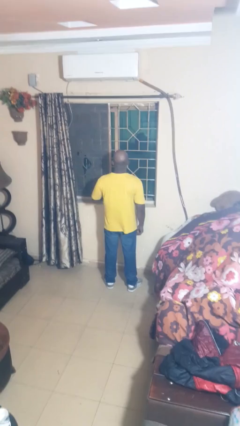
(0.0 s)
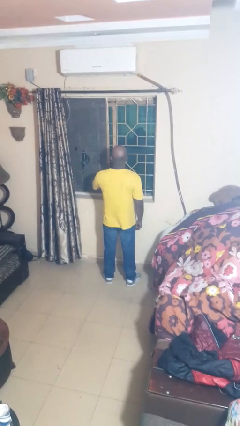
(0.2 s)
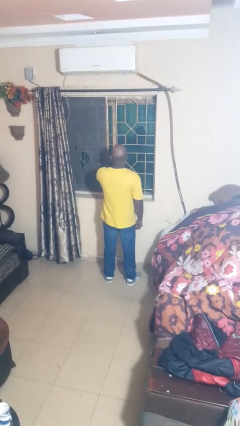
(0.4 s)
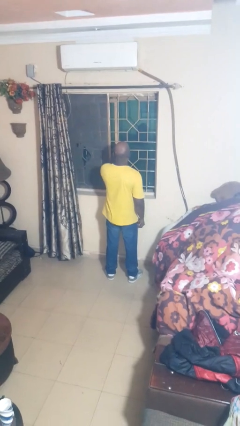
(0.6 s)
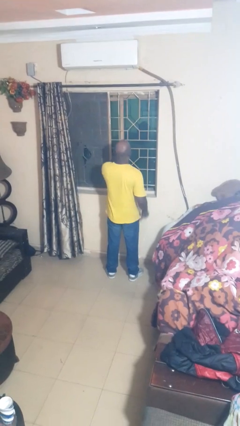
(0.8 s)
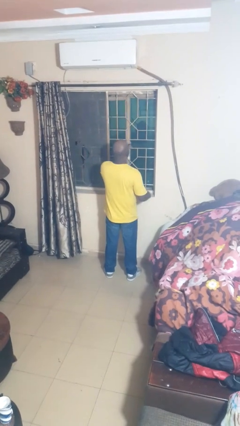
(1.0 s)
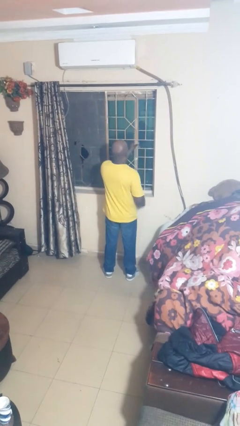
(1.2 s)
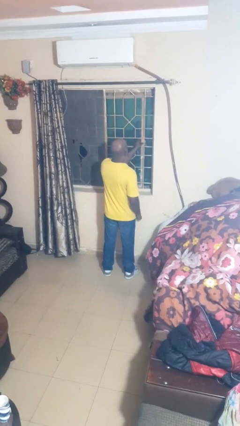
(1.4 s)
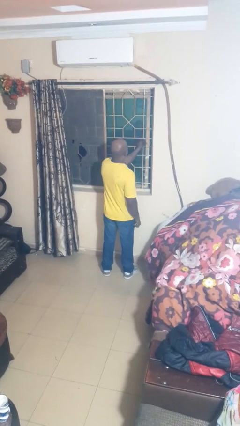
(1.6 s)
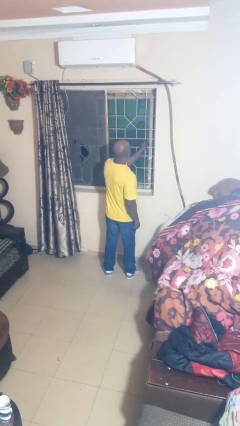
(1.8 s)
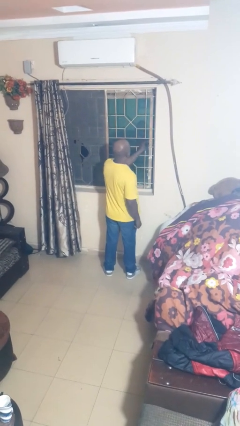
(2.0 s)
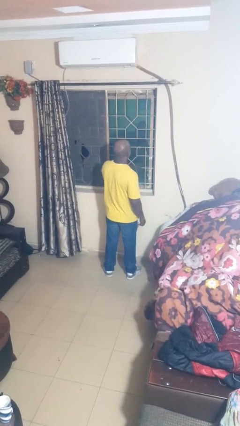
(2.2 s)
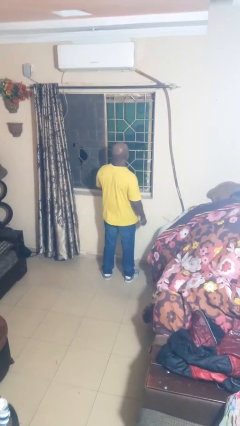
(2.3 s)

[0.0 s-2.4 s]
person closes home window

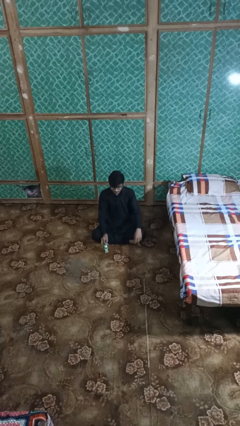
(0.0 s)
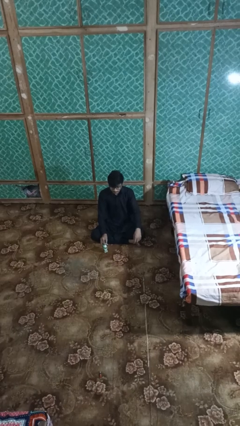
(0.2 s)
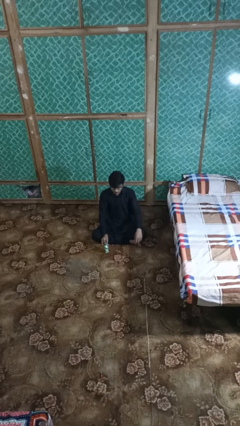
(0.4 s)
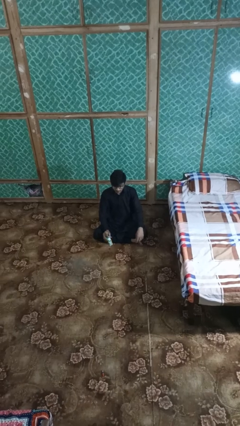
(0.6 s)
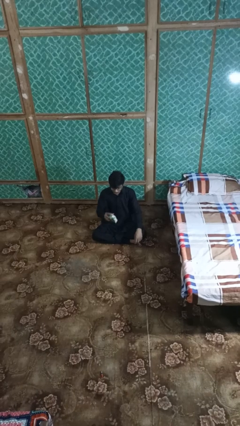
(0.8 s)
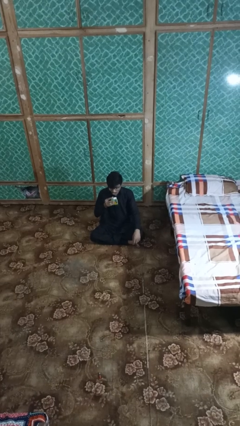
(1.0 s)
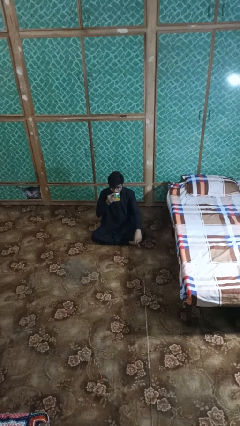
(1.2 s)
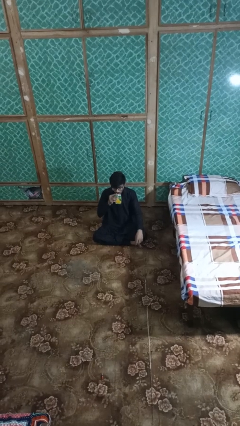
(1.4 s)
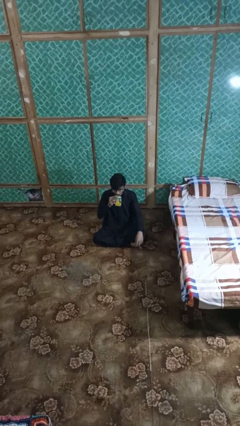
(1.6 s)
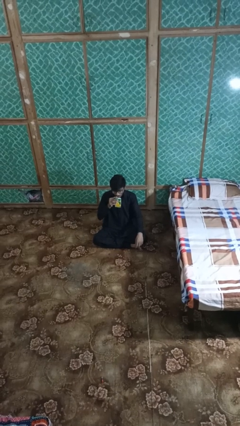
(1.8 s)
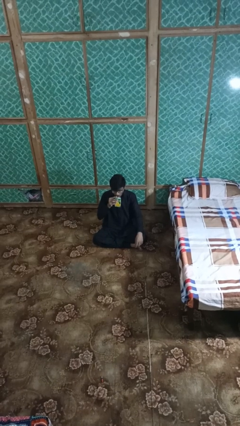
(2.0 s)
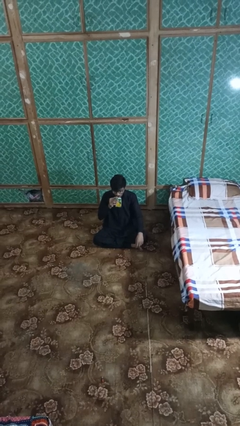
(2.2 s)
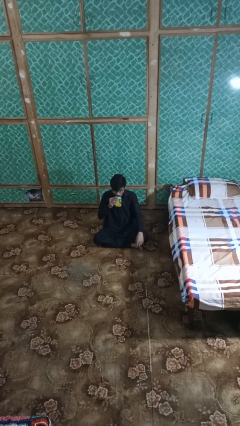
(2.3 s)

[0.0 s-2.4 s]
person drinks from straw

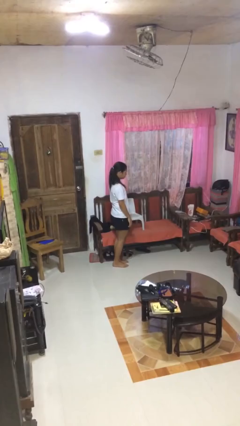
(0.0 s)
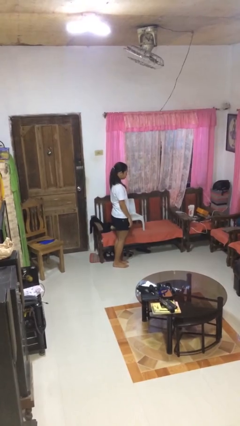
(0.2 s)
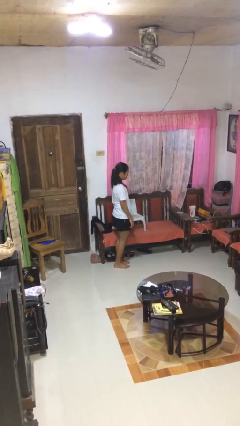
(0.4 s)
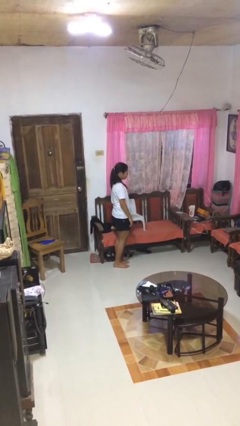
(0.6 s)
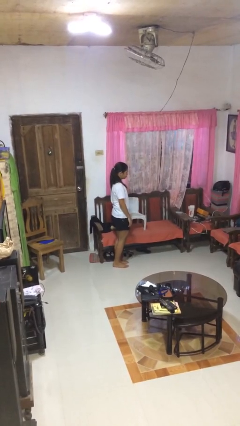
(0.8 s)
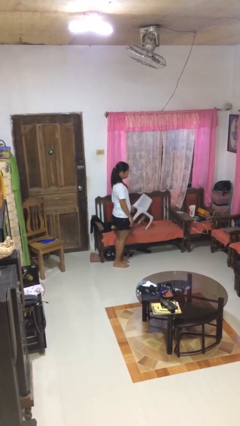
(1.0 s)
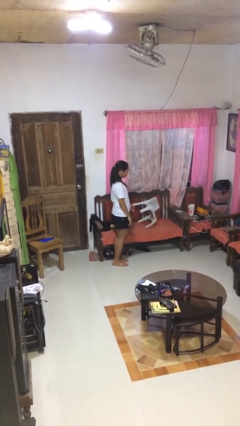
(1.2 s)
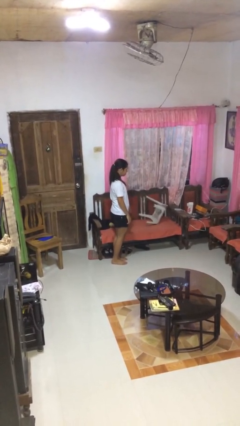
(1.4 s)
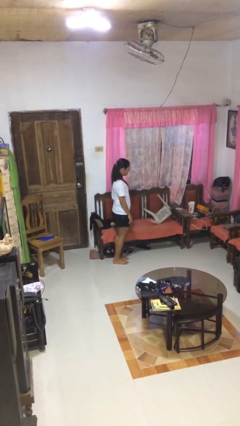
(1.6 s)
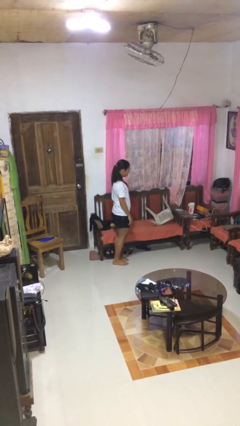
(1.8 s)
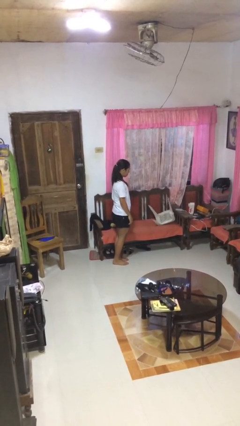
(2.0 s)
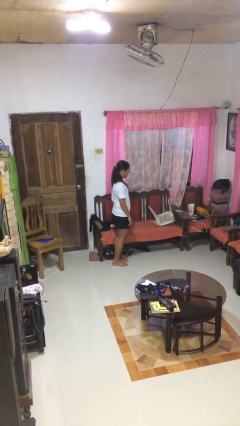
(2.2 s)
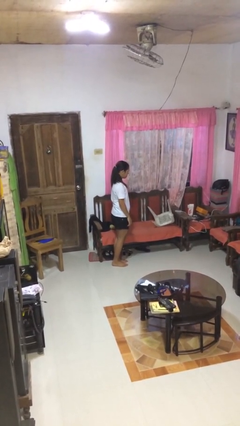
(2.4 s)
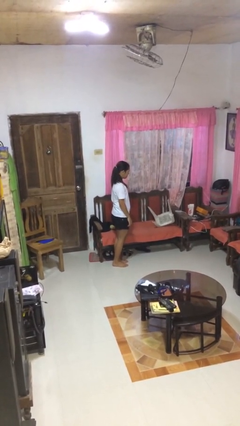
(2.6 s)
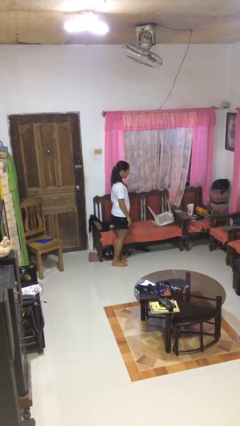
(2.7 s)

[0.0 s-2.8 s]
person knocks over furniture

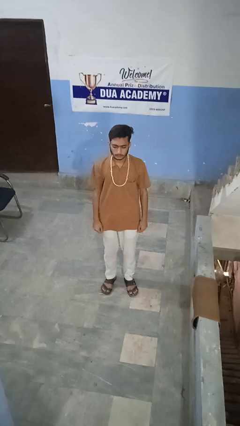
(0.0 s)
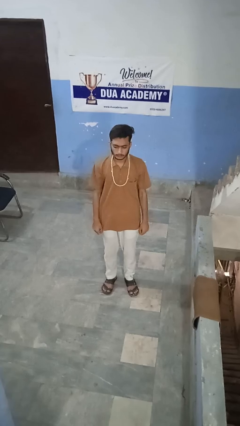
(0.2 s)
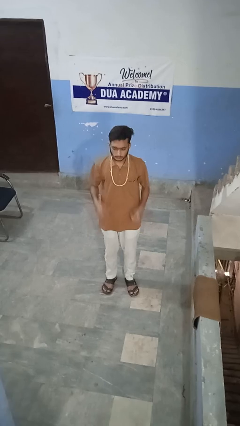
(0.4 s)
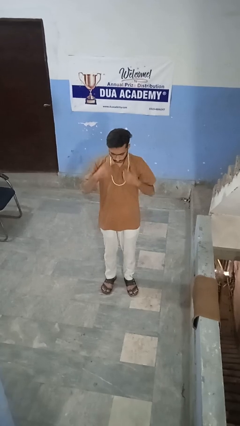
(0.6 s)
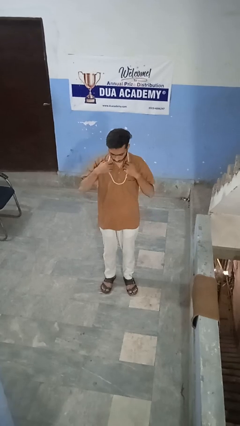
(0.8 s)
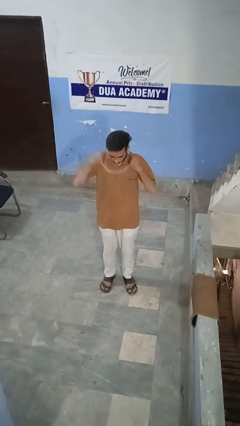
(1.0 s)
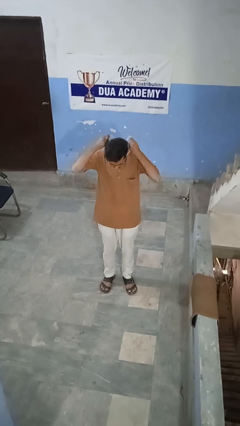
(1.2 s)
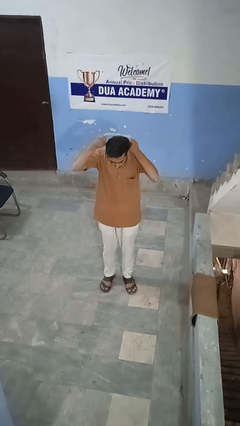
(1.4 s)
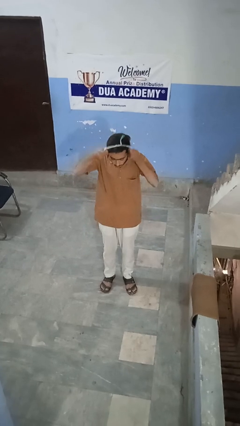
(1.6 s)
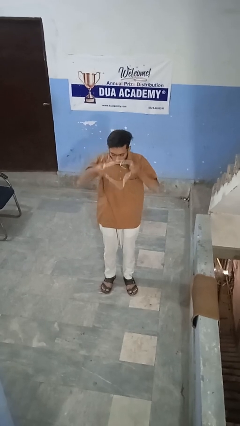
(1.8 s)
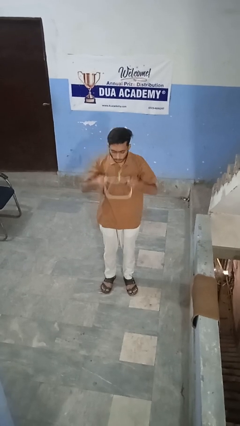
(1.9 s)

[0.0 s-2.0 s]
person takes off necklace

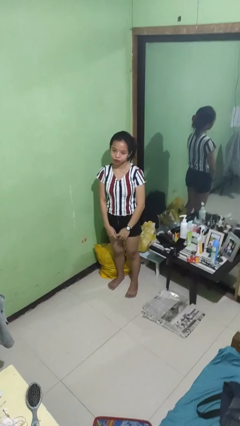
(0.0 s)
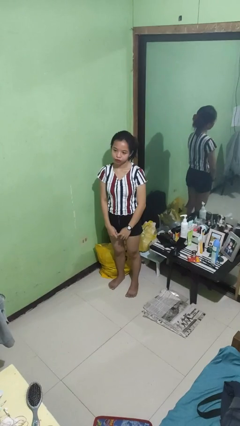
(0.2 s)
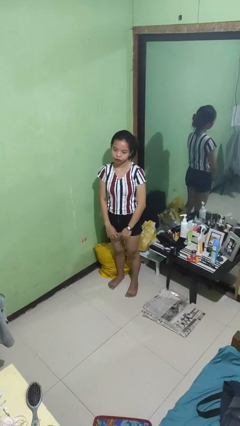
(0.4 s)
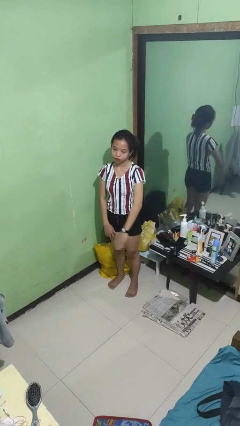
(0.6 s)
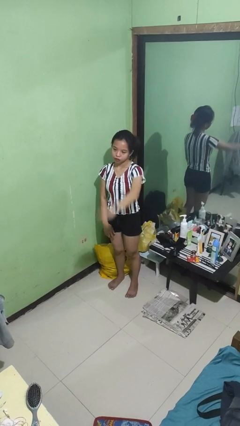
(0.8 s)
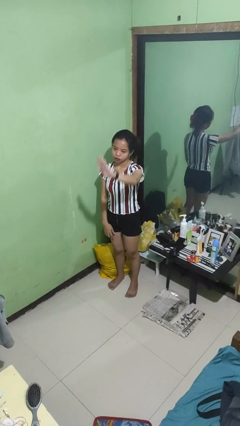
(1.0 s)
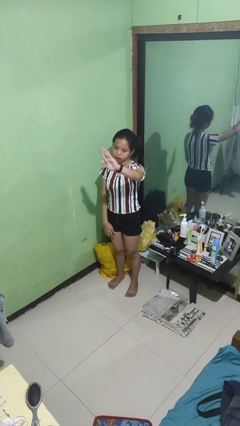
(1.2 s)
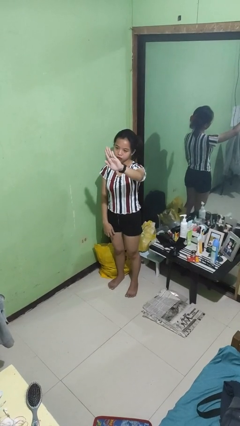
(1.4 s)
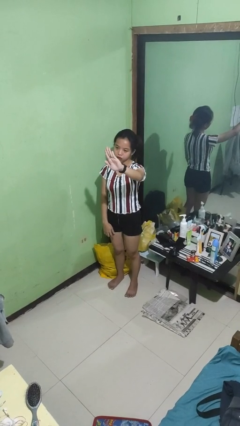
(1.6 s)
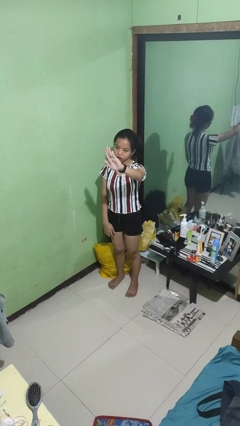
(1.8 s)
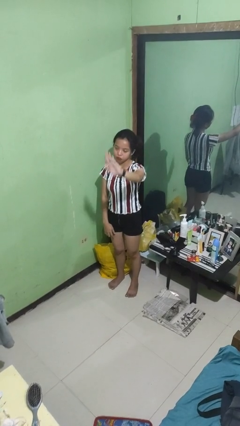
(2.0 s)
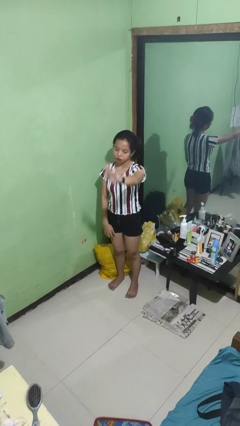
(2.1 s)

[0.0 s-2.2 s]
person gestures stop

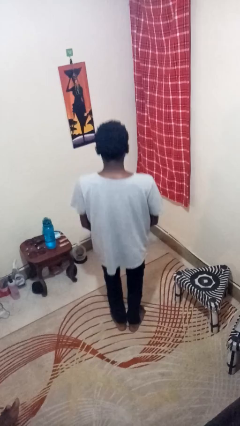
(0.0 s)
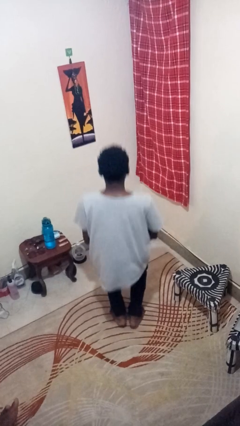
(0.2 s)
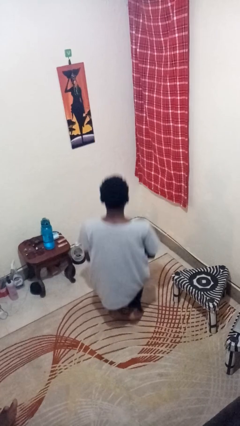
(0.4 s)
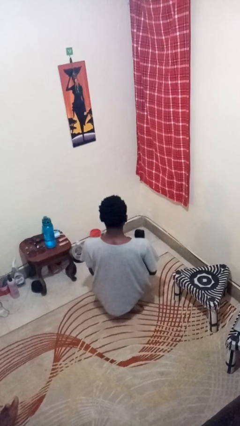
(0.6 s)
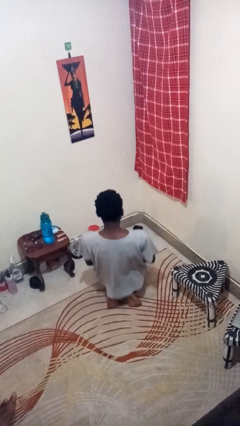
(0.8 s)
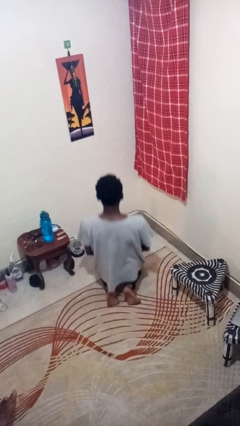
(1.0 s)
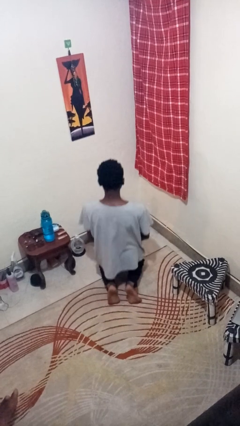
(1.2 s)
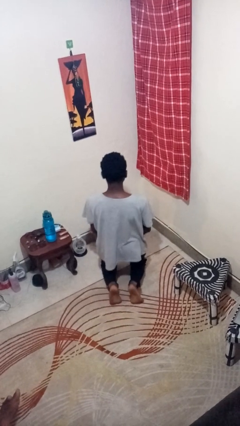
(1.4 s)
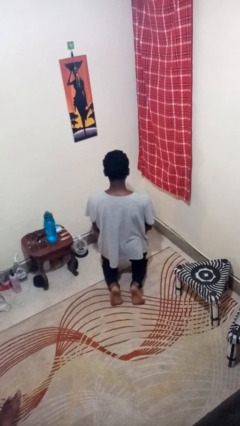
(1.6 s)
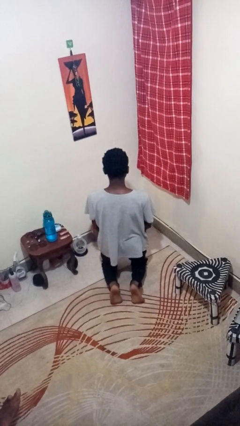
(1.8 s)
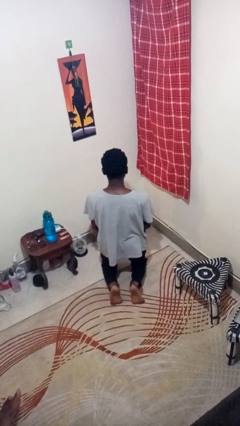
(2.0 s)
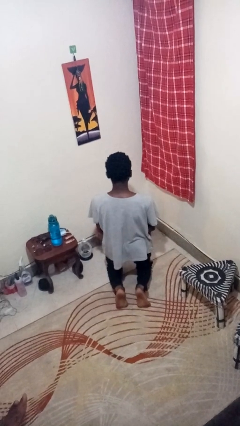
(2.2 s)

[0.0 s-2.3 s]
person kneels

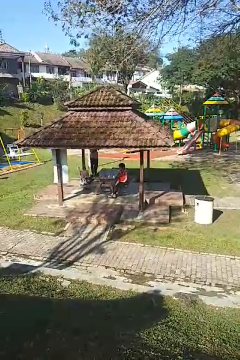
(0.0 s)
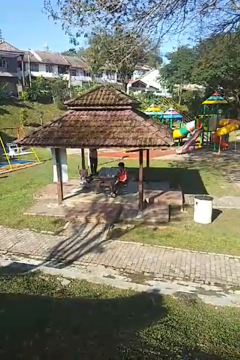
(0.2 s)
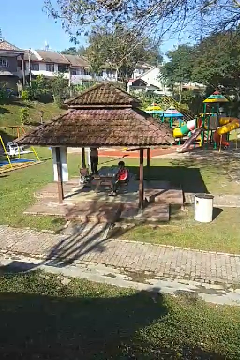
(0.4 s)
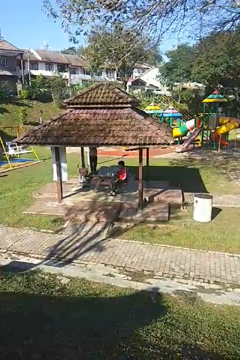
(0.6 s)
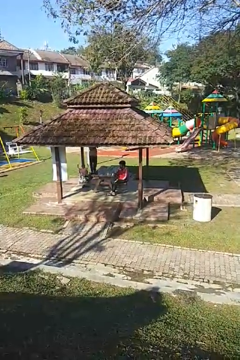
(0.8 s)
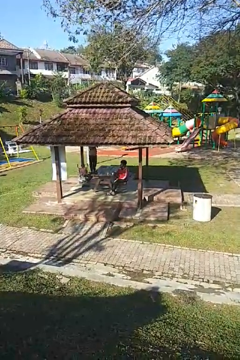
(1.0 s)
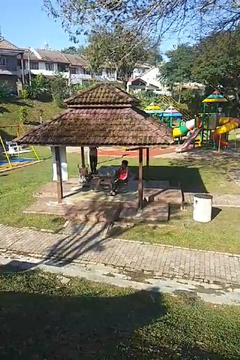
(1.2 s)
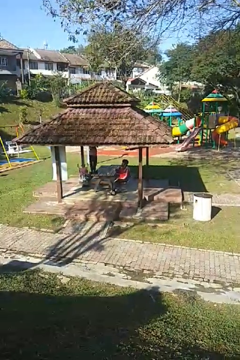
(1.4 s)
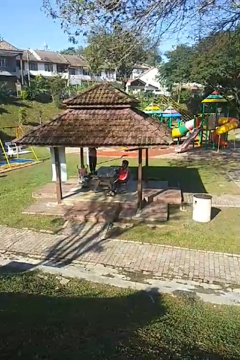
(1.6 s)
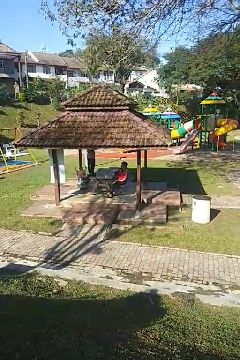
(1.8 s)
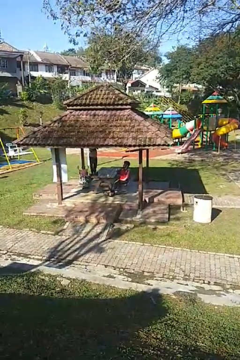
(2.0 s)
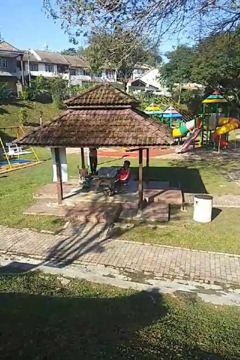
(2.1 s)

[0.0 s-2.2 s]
person picks up object from table

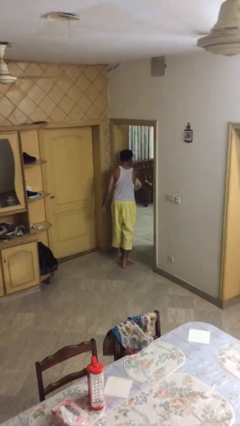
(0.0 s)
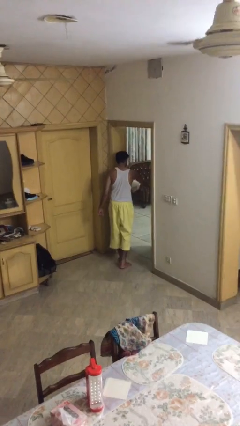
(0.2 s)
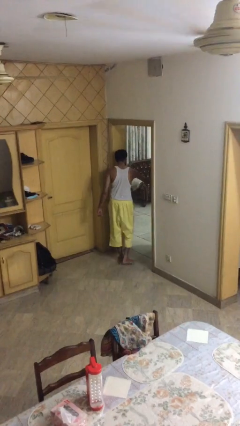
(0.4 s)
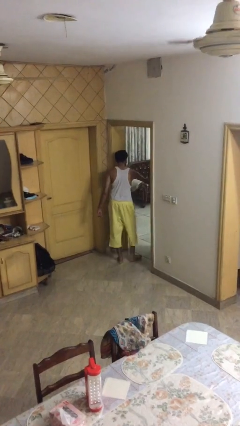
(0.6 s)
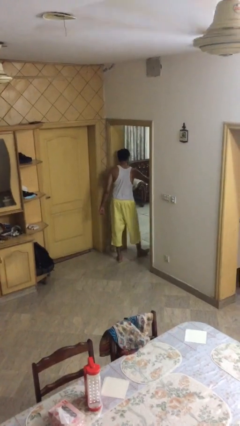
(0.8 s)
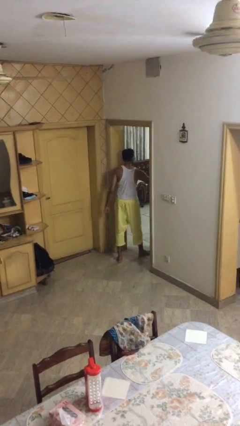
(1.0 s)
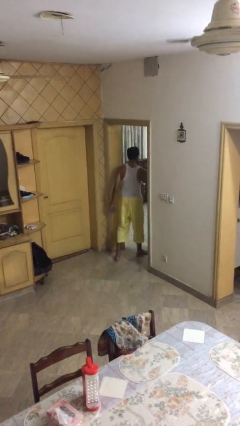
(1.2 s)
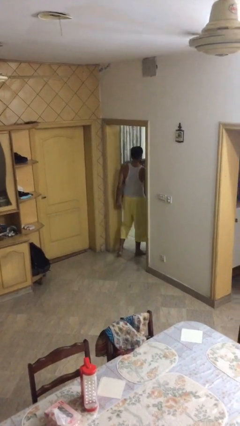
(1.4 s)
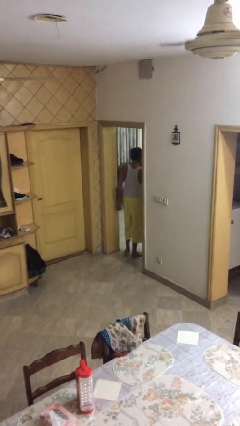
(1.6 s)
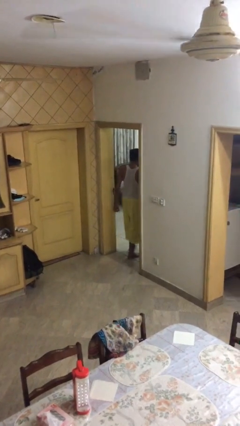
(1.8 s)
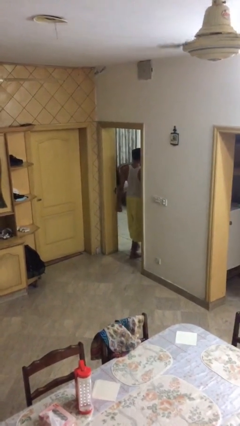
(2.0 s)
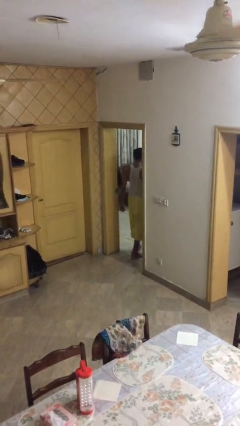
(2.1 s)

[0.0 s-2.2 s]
person exits scene through structure
